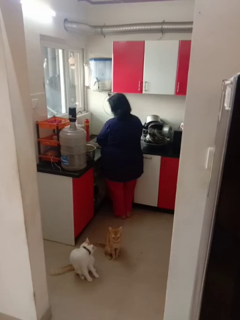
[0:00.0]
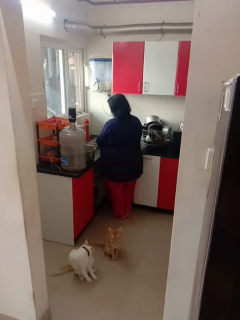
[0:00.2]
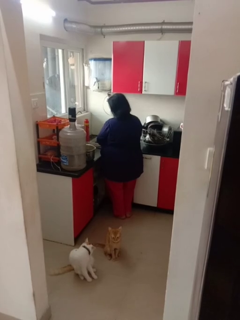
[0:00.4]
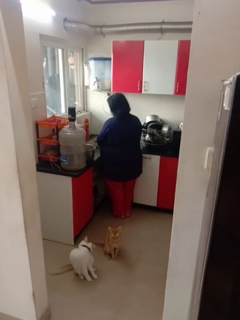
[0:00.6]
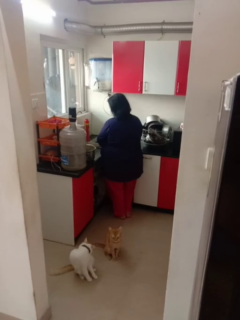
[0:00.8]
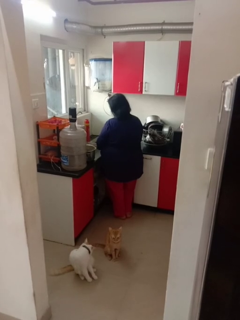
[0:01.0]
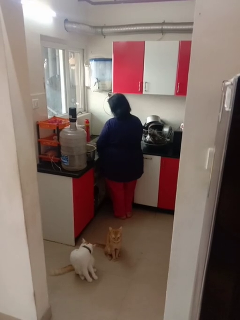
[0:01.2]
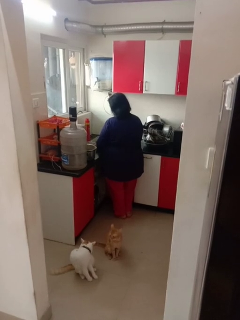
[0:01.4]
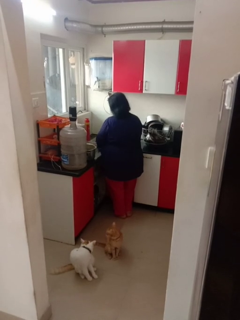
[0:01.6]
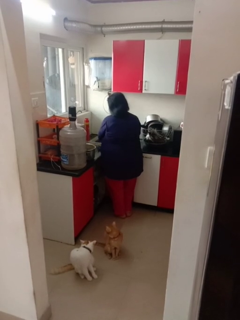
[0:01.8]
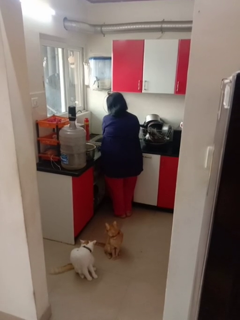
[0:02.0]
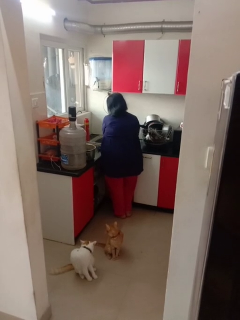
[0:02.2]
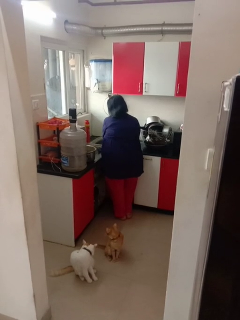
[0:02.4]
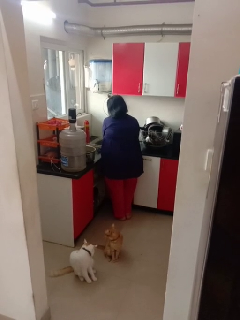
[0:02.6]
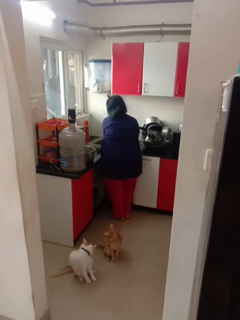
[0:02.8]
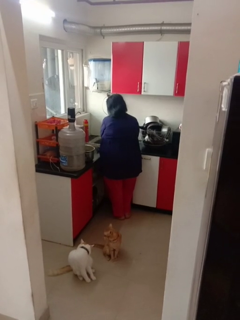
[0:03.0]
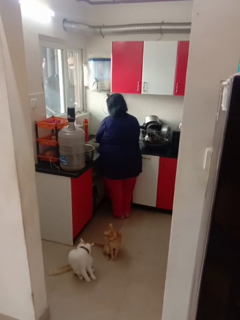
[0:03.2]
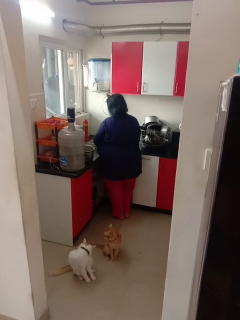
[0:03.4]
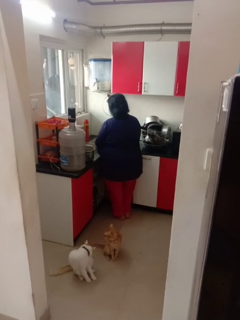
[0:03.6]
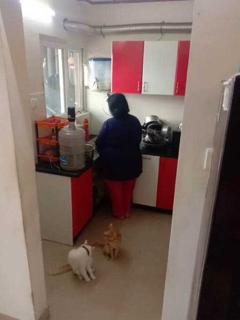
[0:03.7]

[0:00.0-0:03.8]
person washes dish

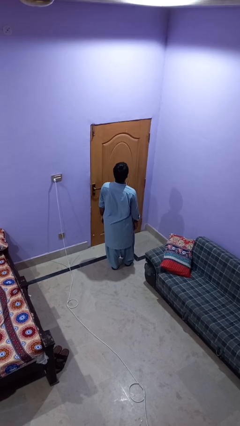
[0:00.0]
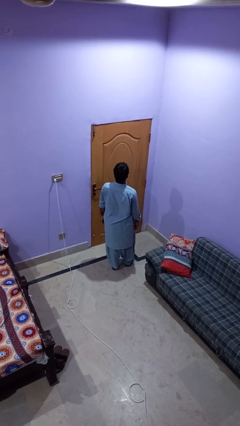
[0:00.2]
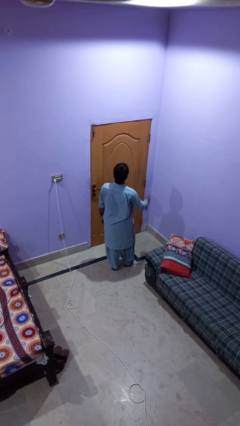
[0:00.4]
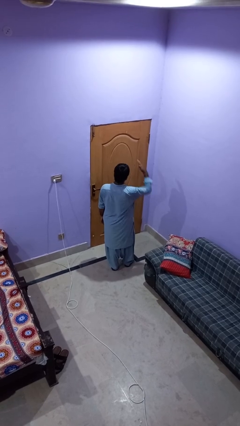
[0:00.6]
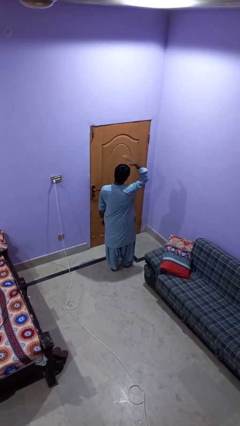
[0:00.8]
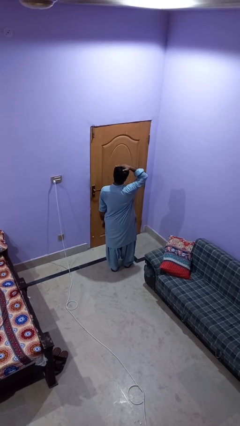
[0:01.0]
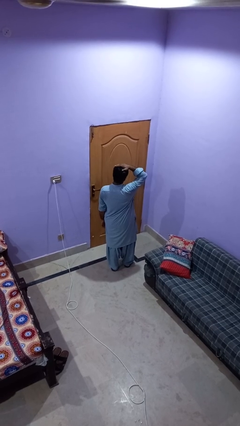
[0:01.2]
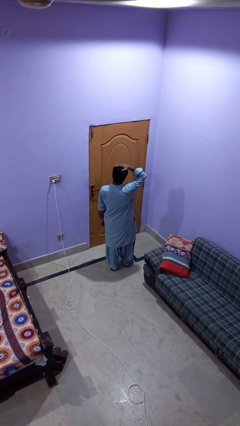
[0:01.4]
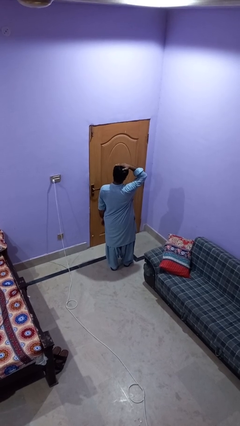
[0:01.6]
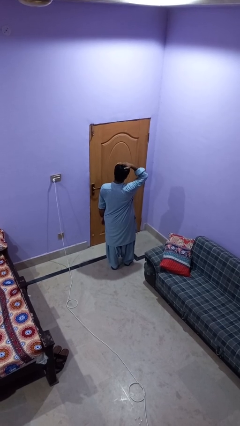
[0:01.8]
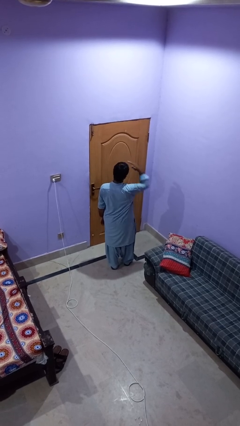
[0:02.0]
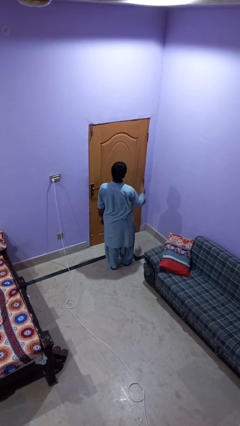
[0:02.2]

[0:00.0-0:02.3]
person pats head

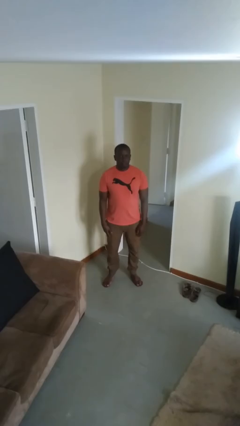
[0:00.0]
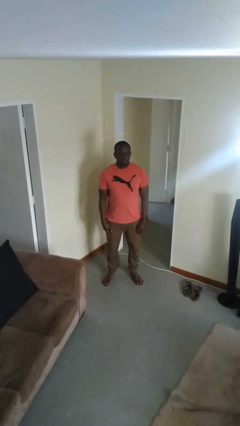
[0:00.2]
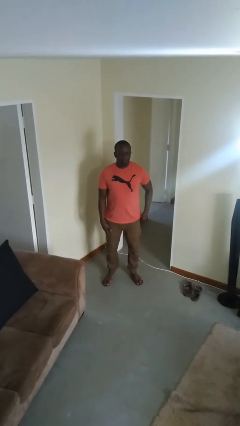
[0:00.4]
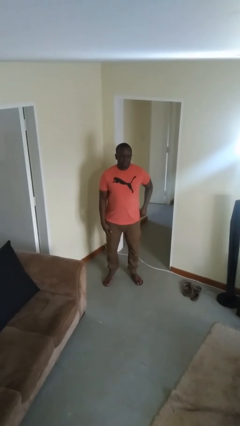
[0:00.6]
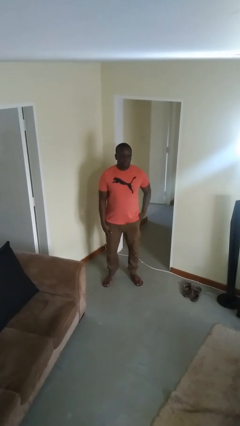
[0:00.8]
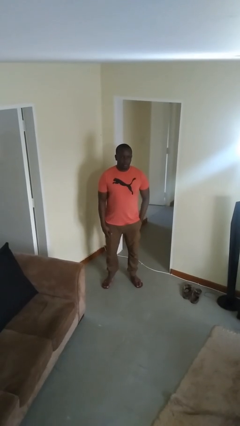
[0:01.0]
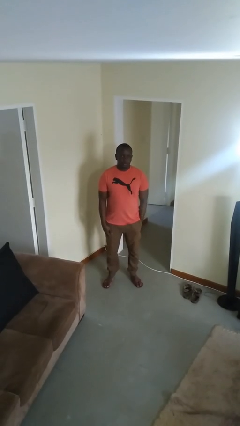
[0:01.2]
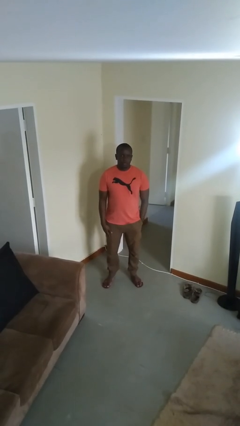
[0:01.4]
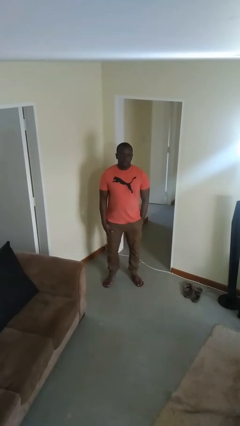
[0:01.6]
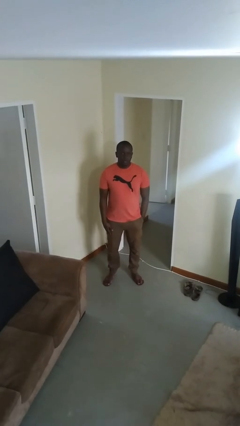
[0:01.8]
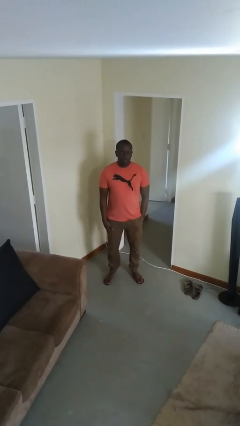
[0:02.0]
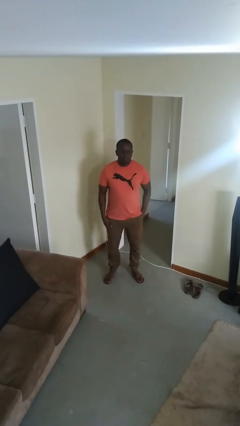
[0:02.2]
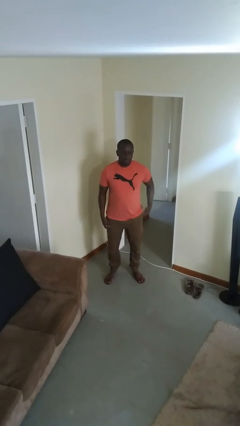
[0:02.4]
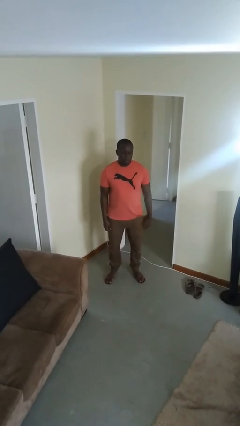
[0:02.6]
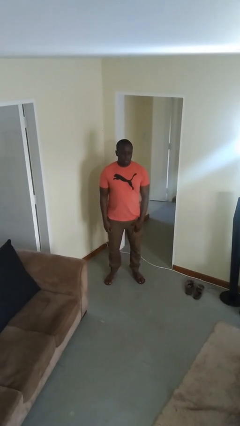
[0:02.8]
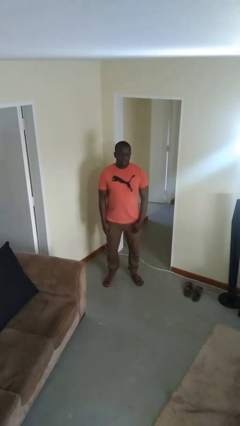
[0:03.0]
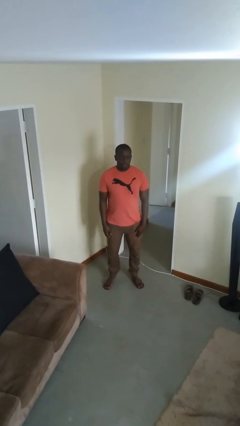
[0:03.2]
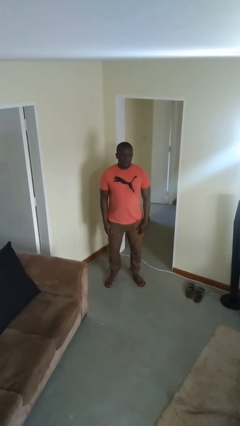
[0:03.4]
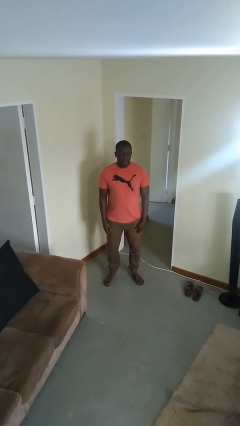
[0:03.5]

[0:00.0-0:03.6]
person puts hands in back pockets

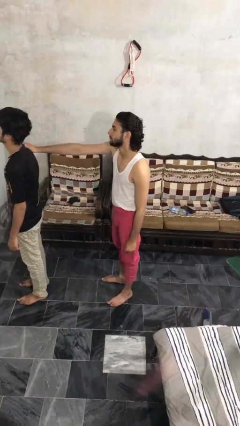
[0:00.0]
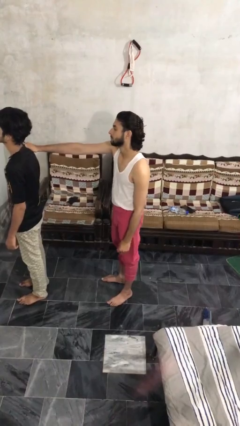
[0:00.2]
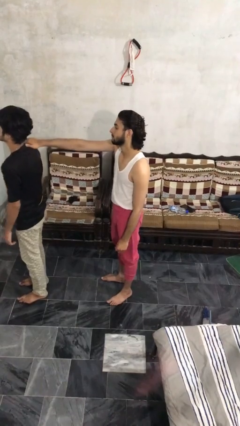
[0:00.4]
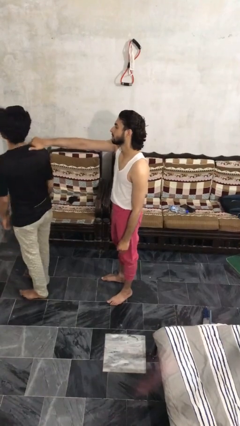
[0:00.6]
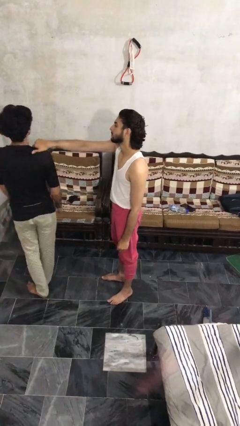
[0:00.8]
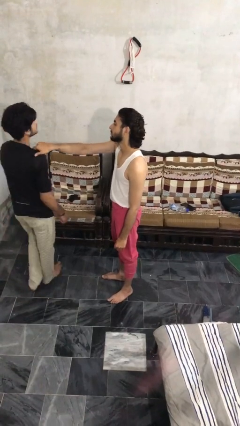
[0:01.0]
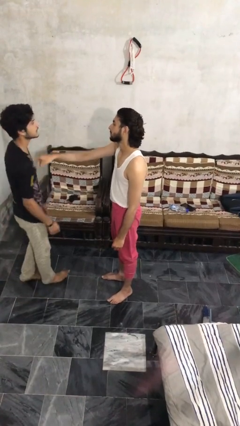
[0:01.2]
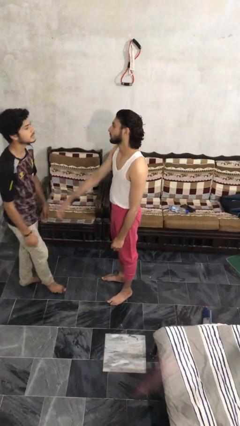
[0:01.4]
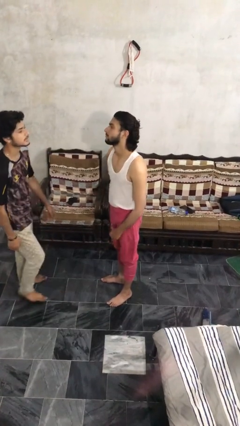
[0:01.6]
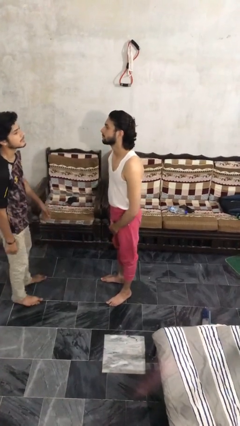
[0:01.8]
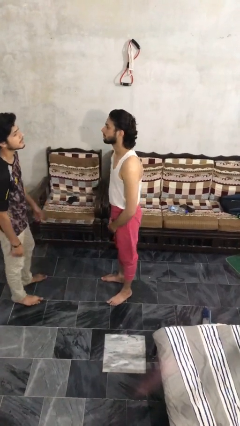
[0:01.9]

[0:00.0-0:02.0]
person spins person around

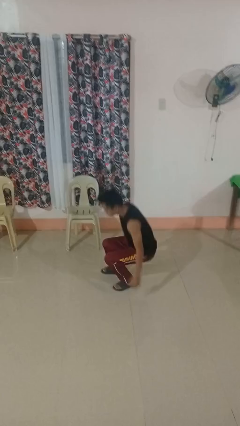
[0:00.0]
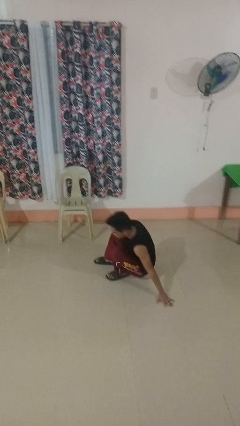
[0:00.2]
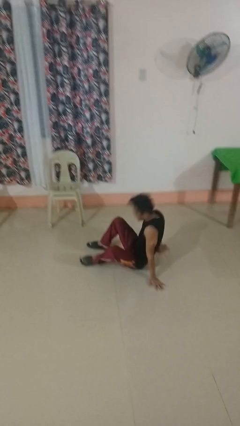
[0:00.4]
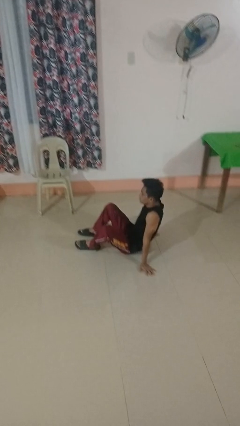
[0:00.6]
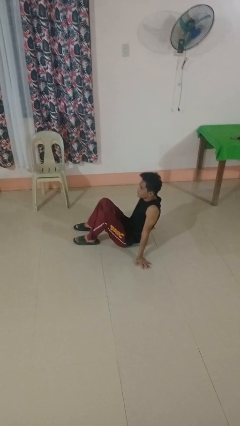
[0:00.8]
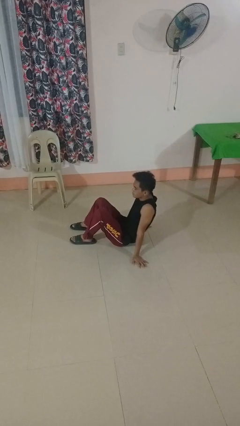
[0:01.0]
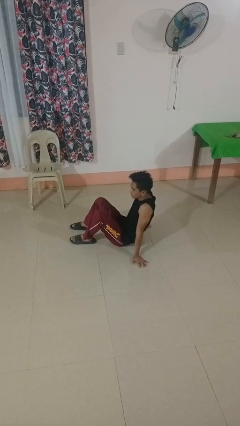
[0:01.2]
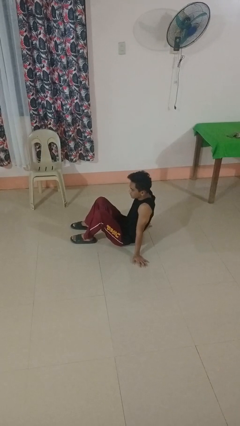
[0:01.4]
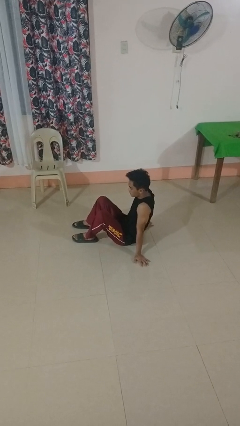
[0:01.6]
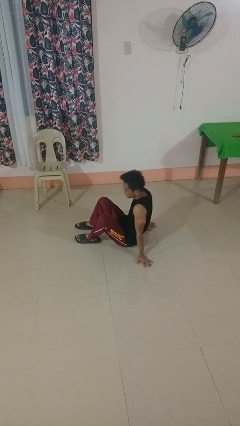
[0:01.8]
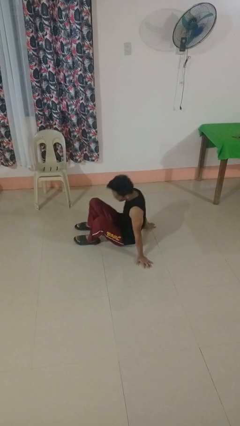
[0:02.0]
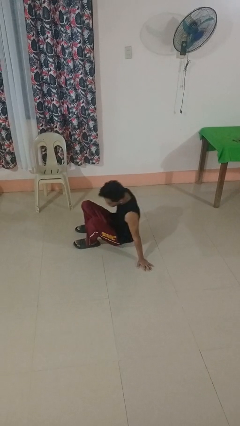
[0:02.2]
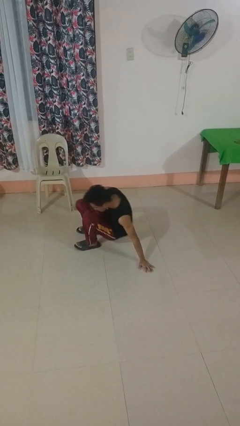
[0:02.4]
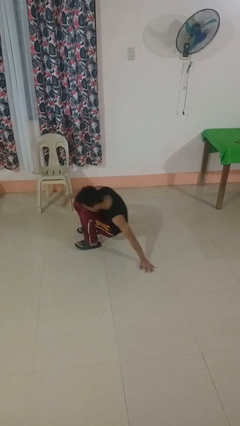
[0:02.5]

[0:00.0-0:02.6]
person falls while standing

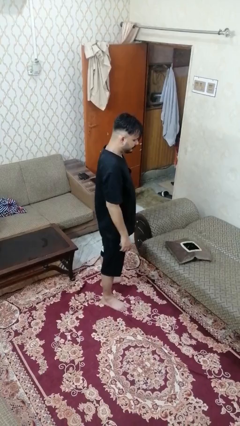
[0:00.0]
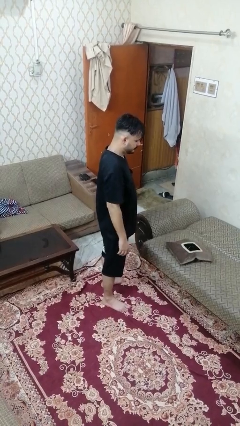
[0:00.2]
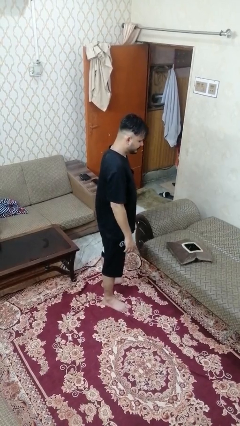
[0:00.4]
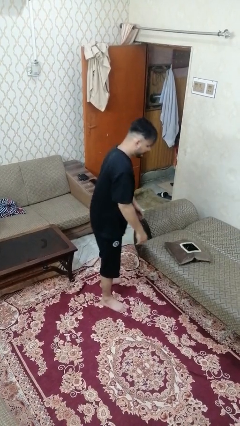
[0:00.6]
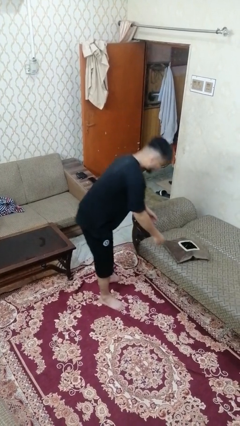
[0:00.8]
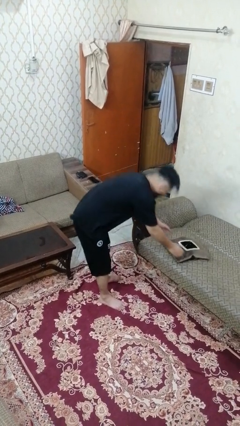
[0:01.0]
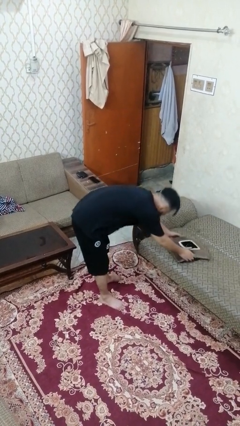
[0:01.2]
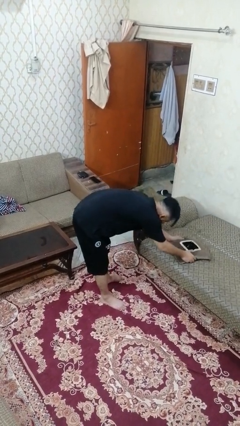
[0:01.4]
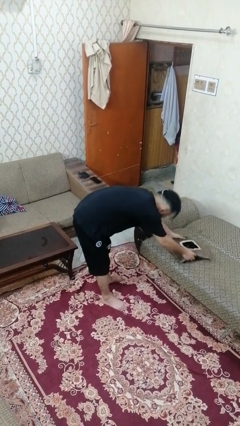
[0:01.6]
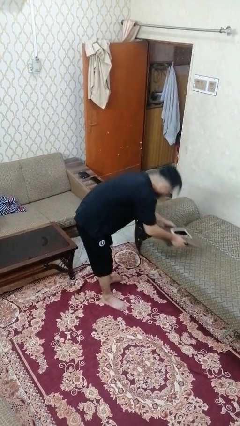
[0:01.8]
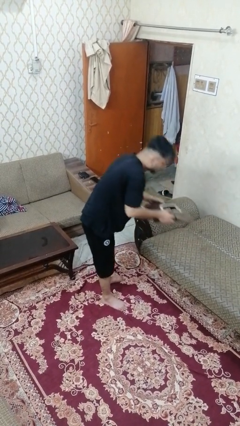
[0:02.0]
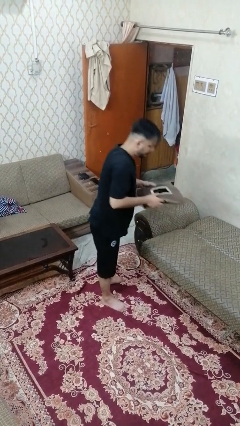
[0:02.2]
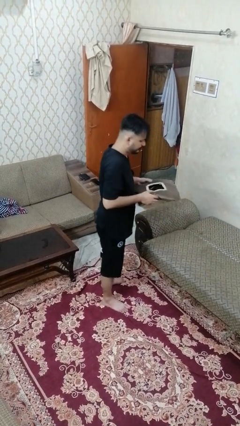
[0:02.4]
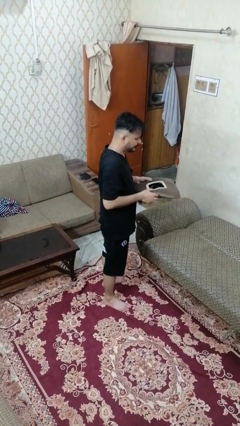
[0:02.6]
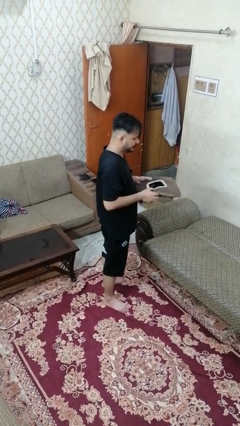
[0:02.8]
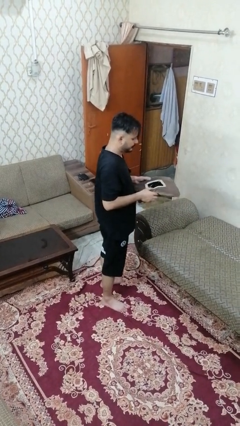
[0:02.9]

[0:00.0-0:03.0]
person picks up object from couch

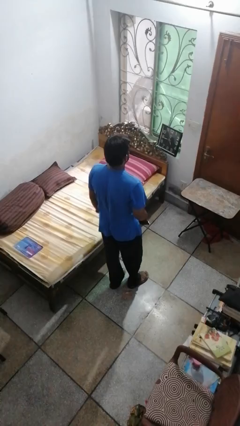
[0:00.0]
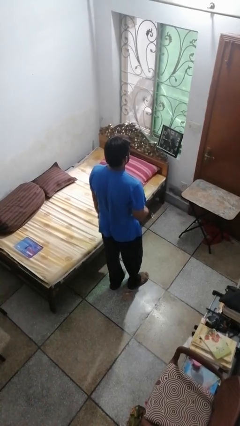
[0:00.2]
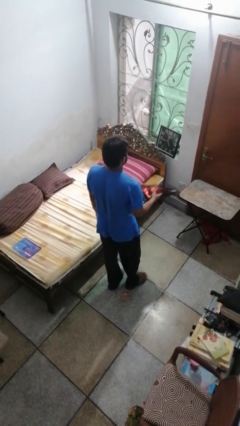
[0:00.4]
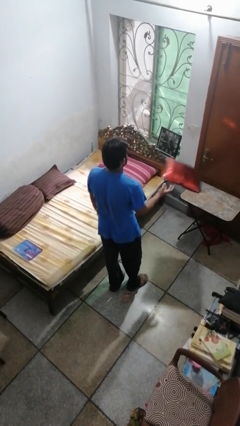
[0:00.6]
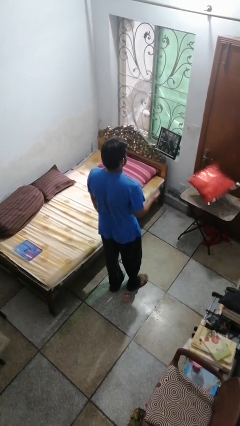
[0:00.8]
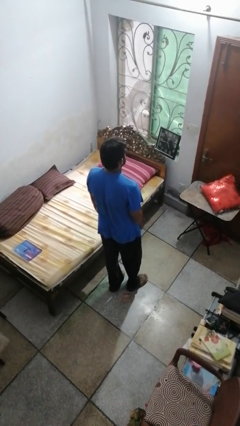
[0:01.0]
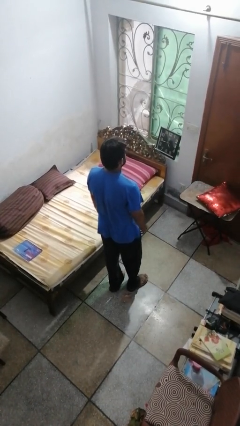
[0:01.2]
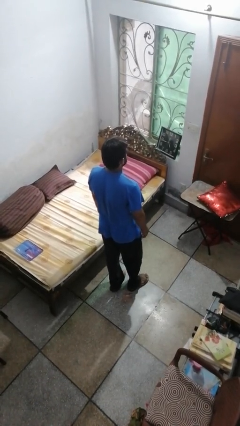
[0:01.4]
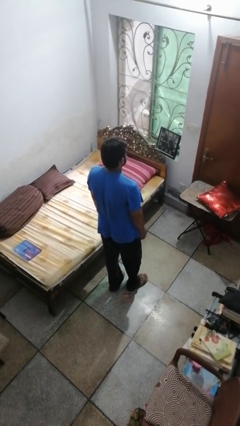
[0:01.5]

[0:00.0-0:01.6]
person throws object on table
